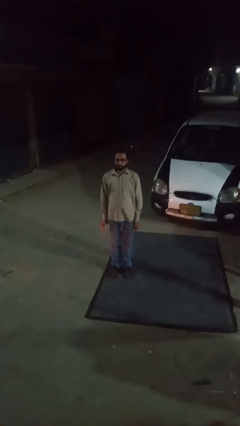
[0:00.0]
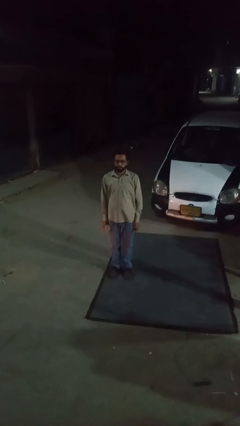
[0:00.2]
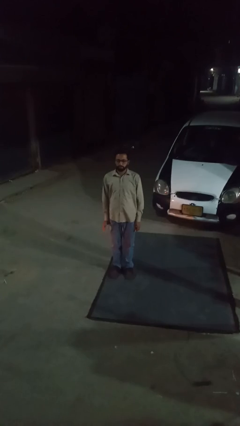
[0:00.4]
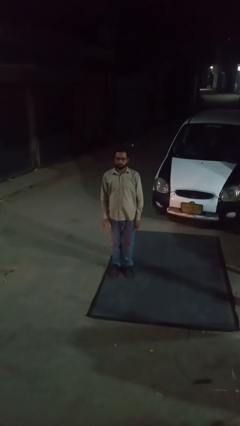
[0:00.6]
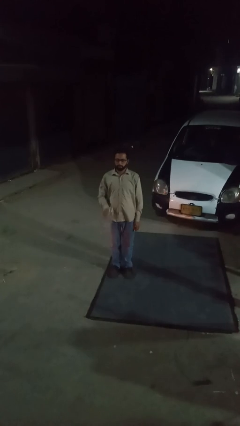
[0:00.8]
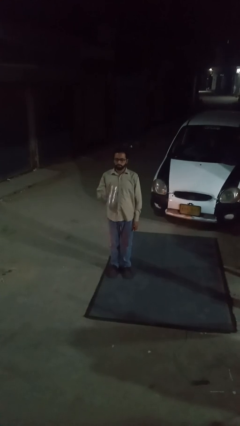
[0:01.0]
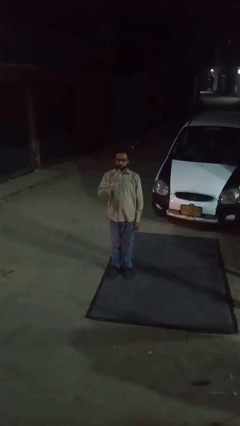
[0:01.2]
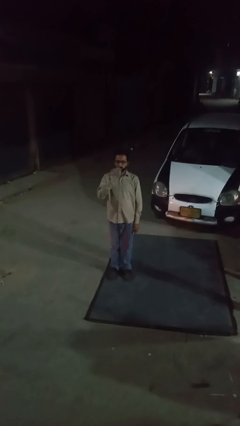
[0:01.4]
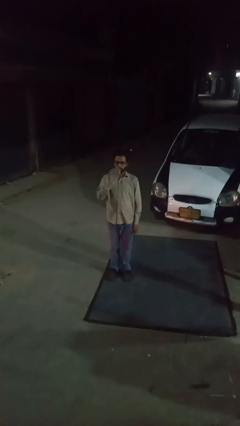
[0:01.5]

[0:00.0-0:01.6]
person drinks from bottle

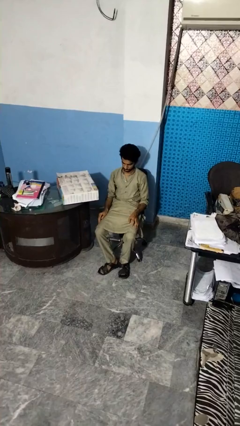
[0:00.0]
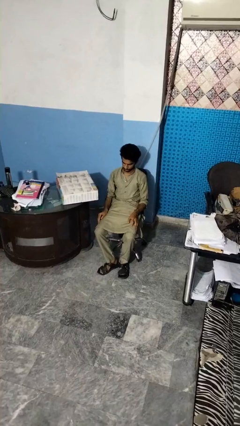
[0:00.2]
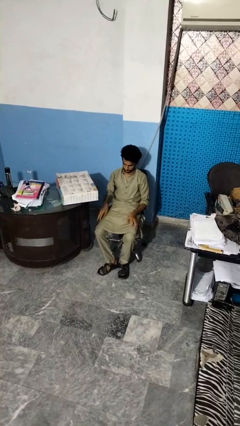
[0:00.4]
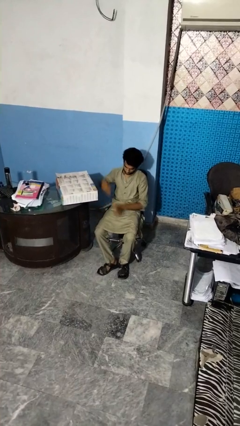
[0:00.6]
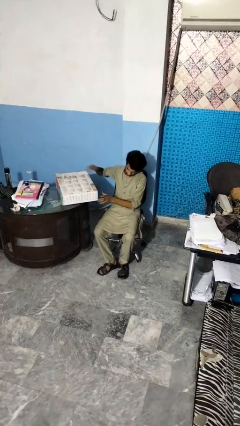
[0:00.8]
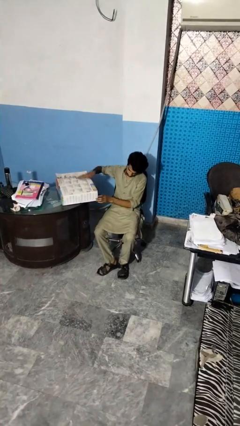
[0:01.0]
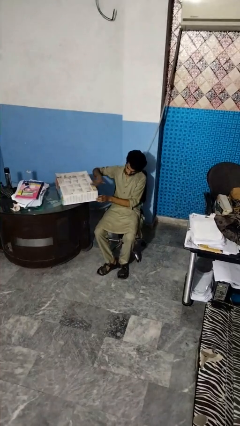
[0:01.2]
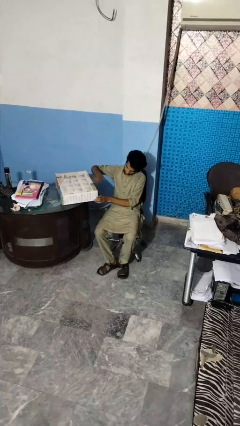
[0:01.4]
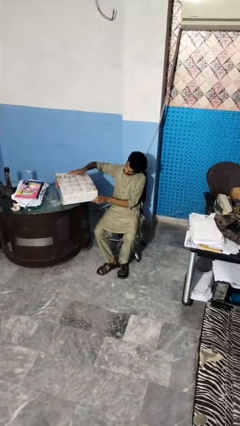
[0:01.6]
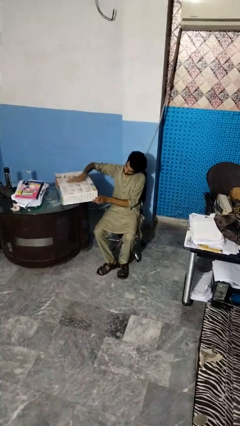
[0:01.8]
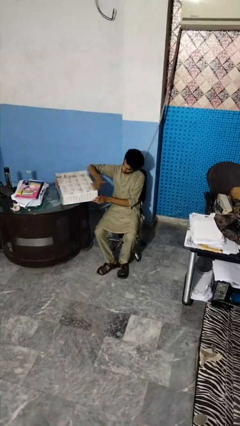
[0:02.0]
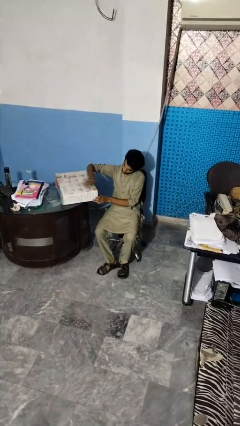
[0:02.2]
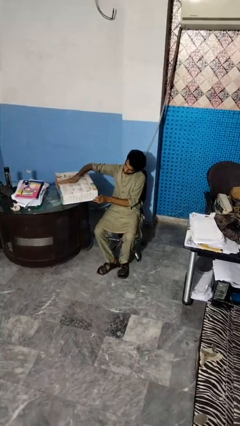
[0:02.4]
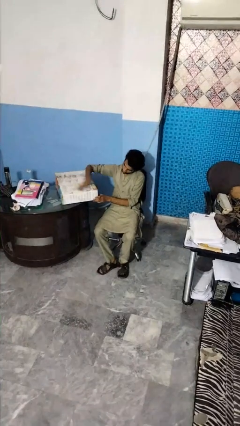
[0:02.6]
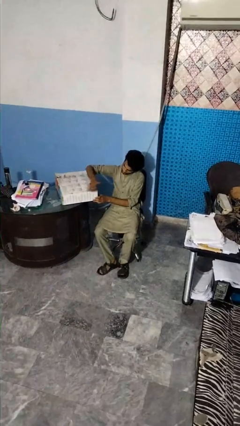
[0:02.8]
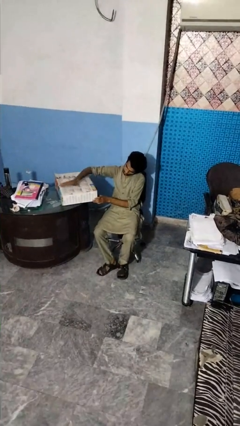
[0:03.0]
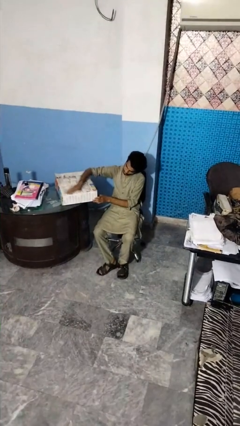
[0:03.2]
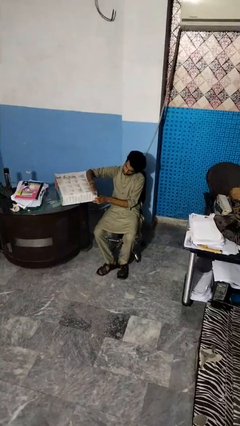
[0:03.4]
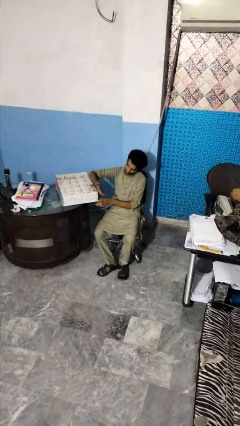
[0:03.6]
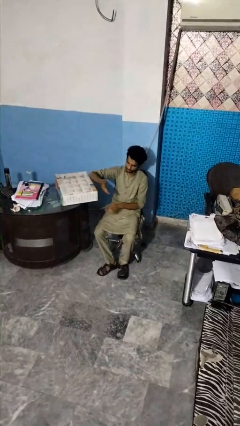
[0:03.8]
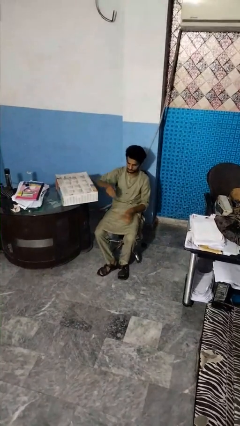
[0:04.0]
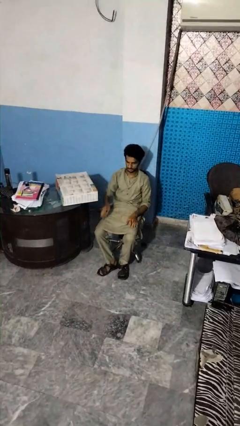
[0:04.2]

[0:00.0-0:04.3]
person waves hand over object

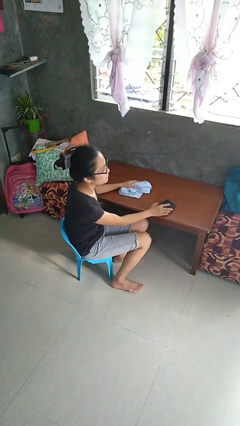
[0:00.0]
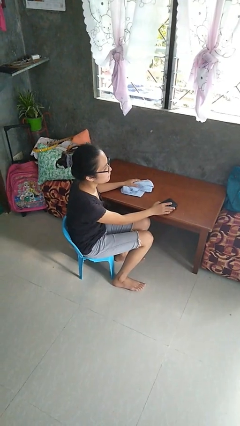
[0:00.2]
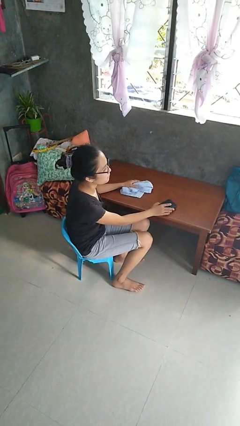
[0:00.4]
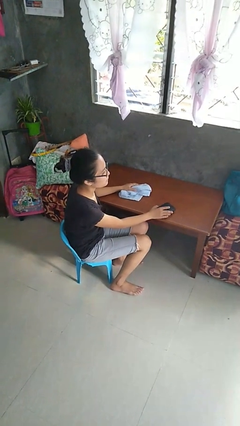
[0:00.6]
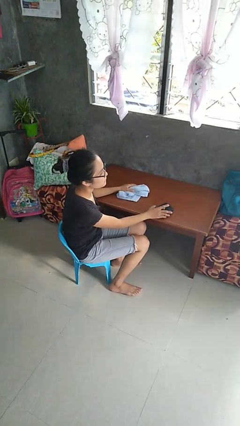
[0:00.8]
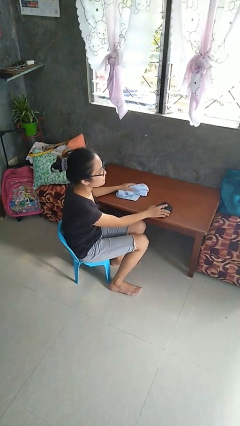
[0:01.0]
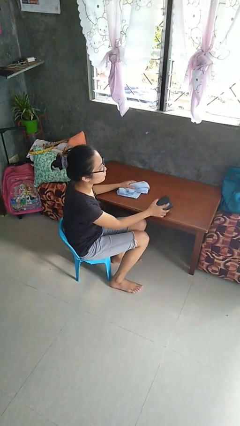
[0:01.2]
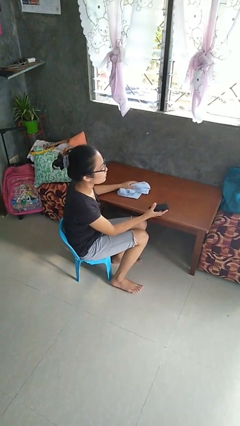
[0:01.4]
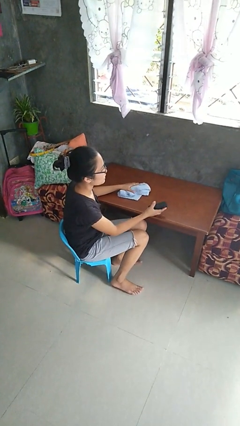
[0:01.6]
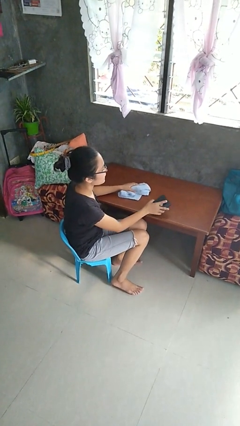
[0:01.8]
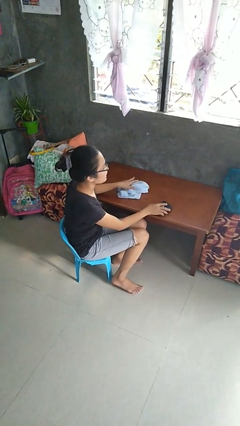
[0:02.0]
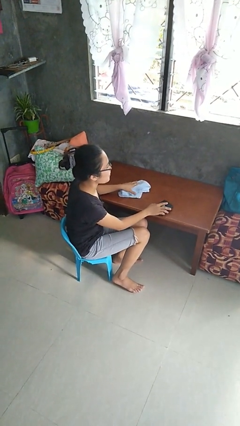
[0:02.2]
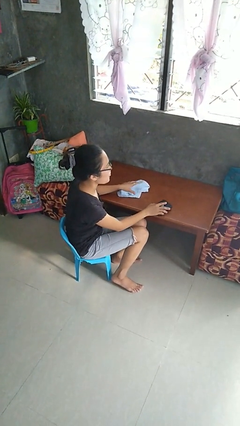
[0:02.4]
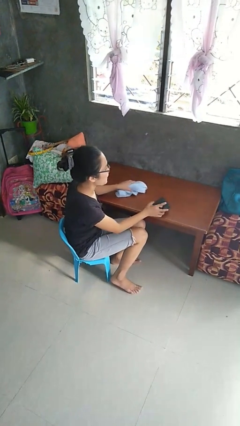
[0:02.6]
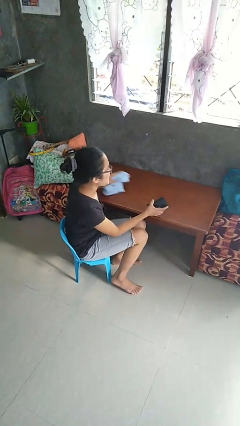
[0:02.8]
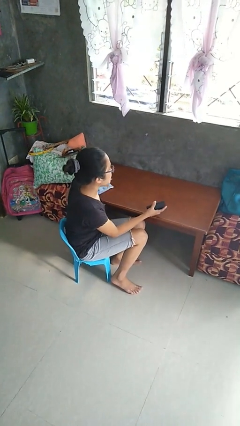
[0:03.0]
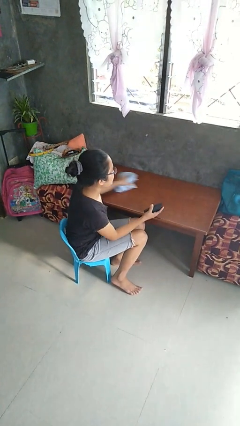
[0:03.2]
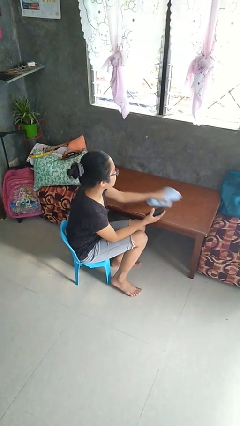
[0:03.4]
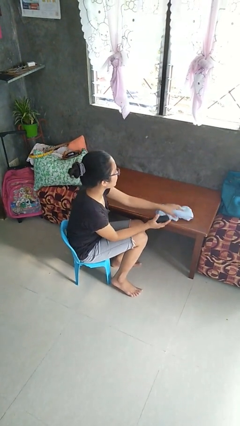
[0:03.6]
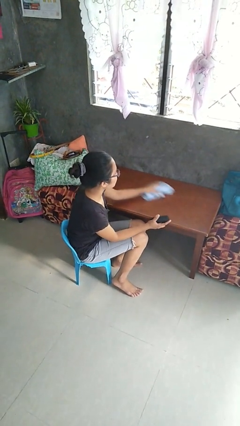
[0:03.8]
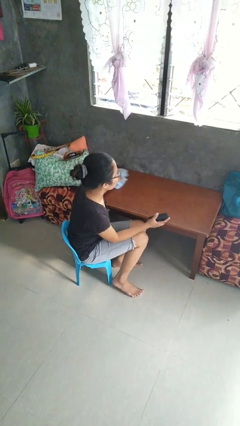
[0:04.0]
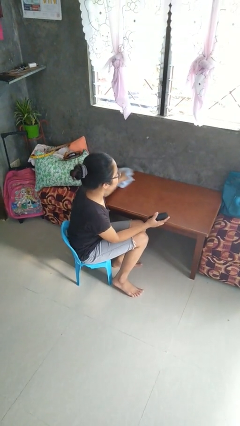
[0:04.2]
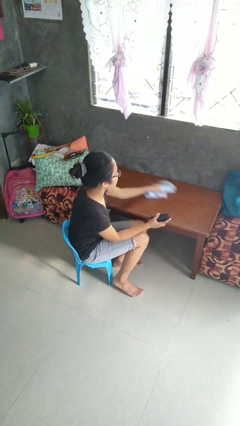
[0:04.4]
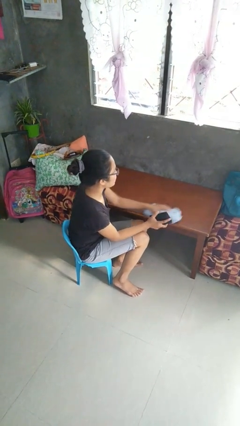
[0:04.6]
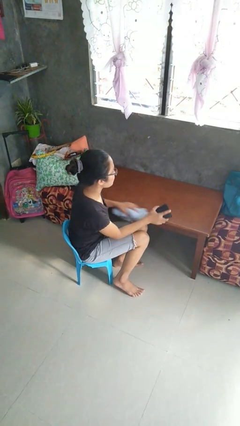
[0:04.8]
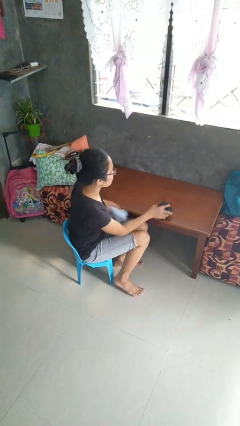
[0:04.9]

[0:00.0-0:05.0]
person cleans table with rag

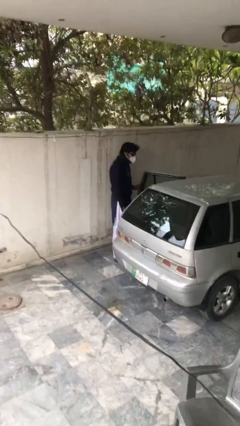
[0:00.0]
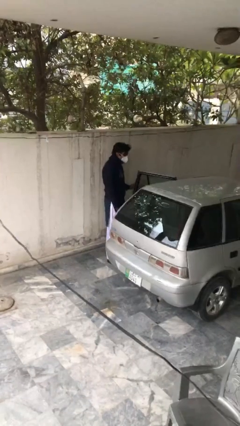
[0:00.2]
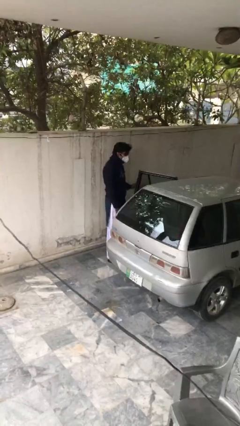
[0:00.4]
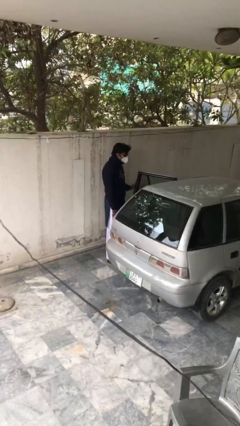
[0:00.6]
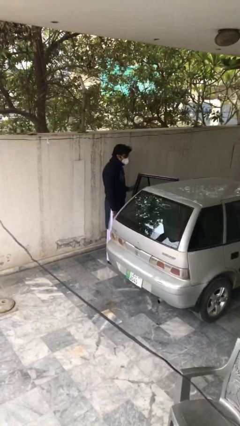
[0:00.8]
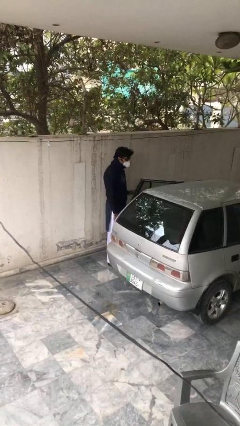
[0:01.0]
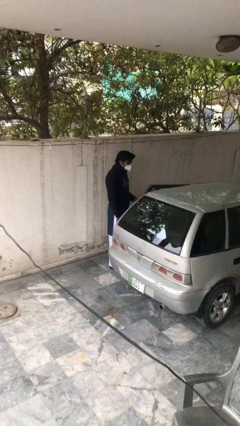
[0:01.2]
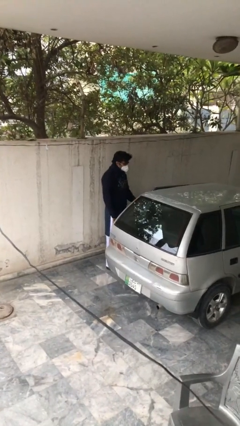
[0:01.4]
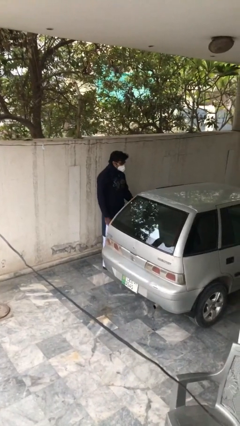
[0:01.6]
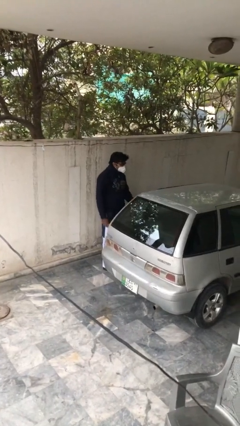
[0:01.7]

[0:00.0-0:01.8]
person closes car door

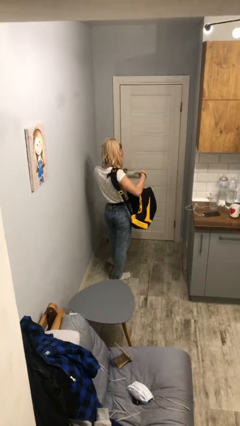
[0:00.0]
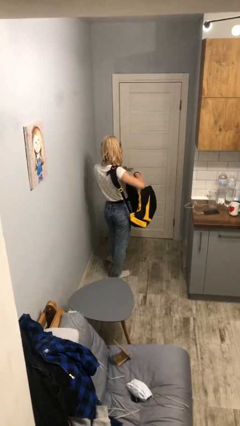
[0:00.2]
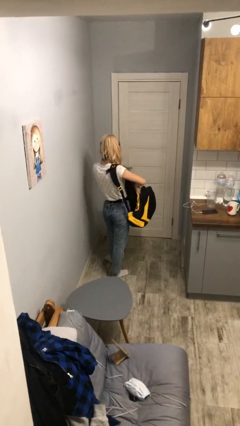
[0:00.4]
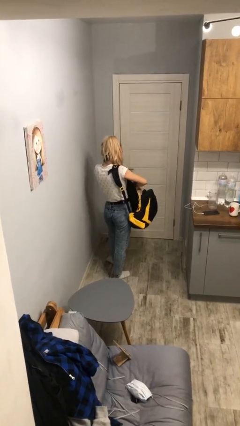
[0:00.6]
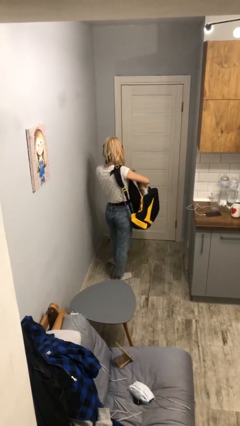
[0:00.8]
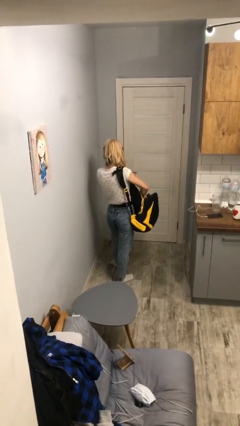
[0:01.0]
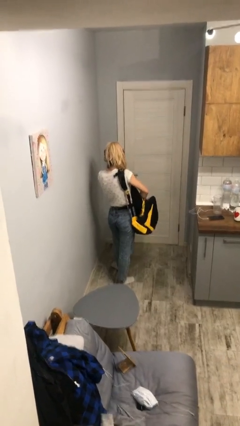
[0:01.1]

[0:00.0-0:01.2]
person puts object into backpack

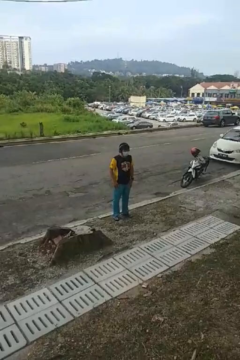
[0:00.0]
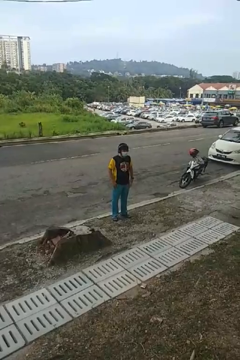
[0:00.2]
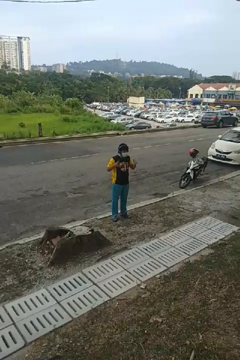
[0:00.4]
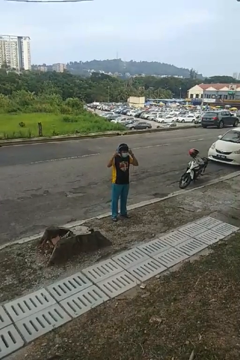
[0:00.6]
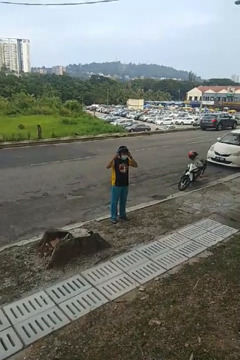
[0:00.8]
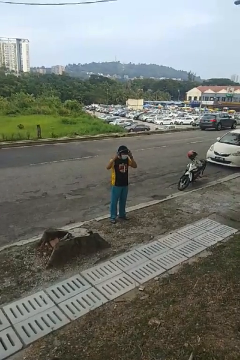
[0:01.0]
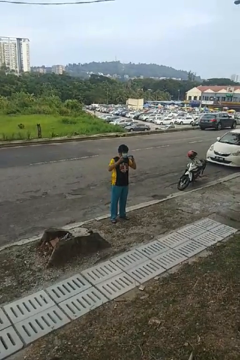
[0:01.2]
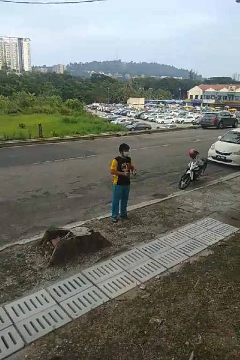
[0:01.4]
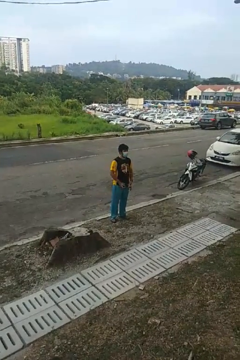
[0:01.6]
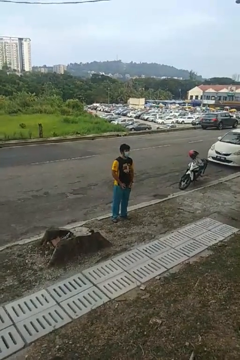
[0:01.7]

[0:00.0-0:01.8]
person takes off headphones

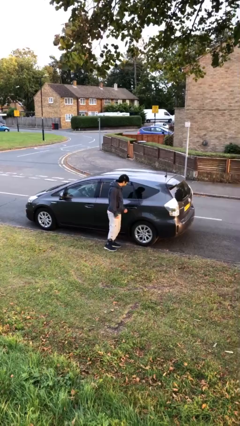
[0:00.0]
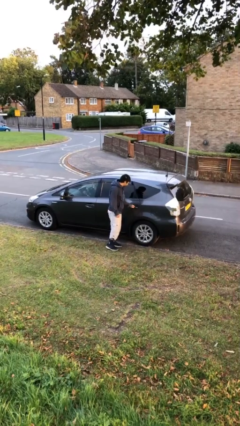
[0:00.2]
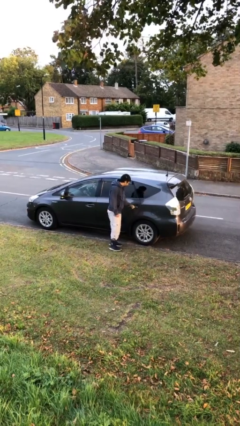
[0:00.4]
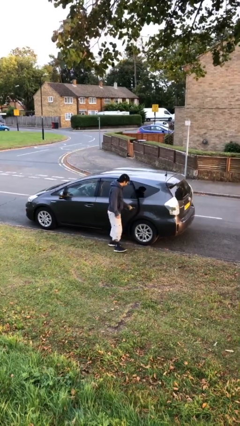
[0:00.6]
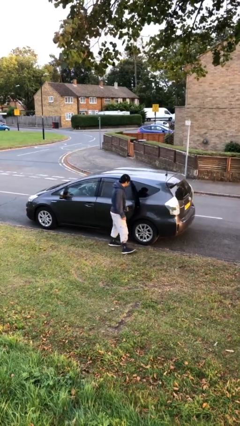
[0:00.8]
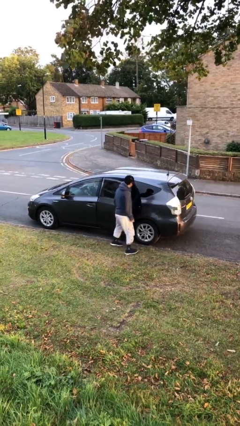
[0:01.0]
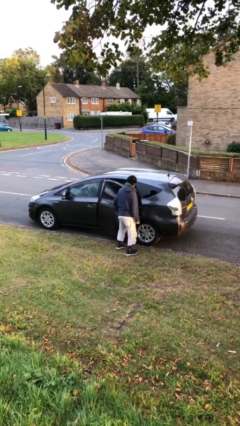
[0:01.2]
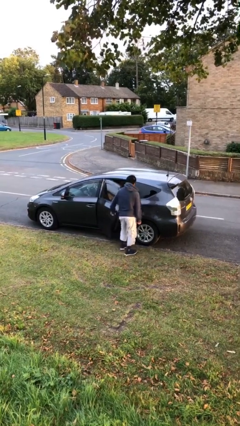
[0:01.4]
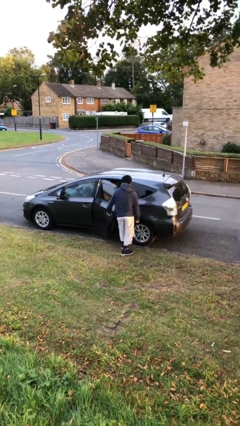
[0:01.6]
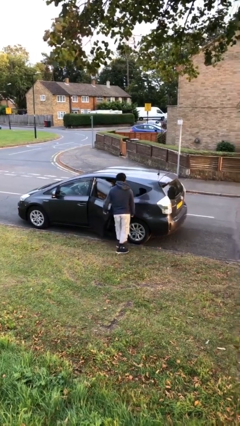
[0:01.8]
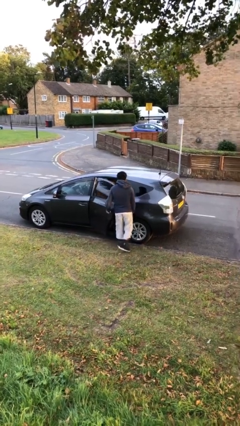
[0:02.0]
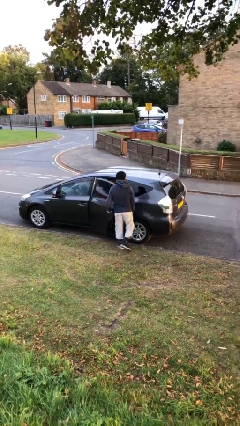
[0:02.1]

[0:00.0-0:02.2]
person opens car door

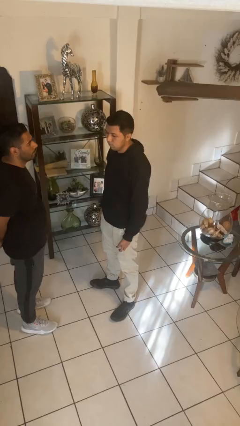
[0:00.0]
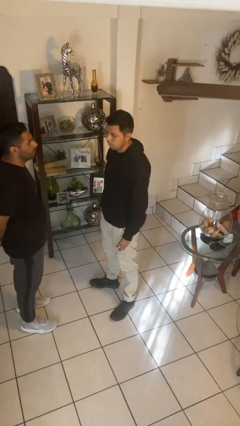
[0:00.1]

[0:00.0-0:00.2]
person laughs with person
